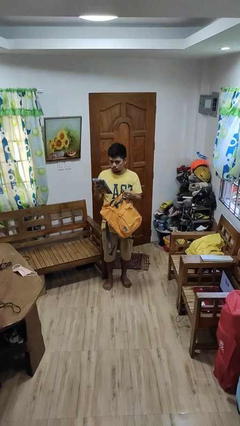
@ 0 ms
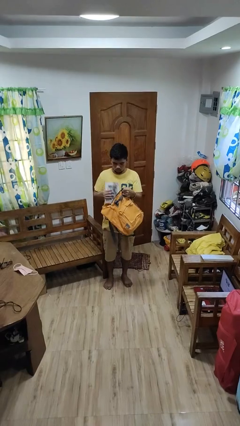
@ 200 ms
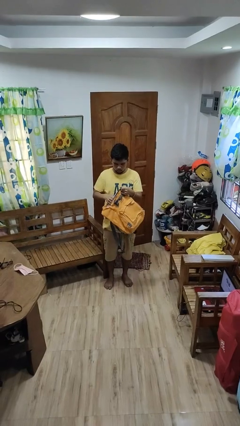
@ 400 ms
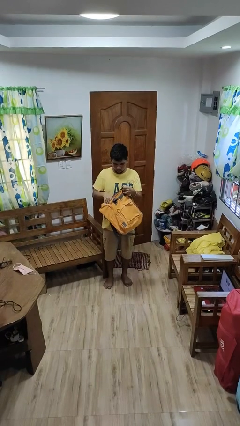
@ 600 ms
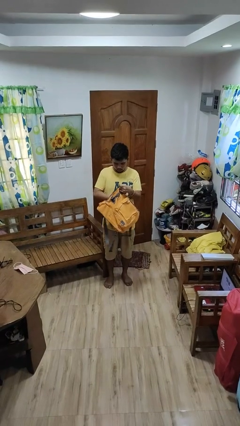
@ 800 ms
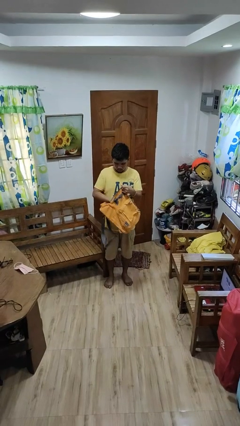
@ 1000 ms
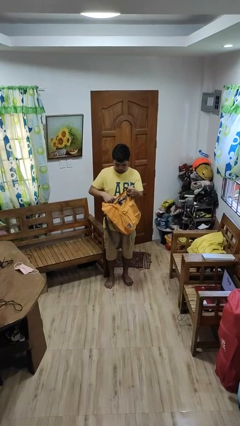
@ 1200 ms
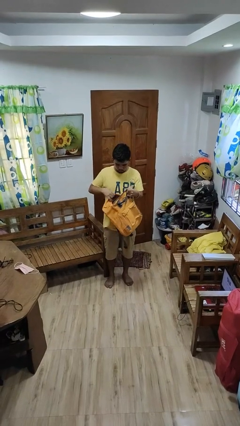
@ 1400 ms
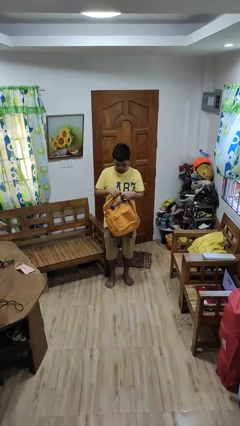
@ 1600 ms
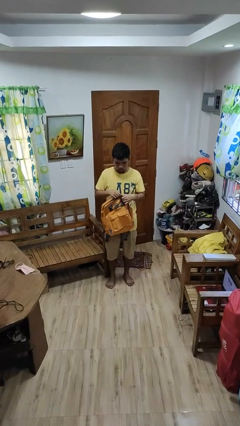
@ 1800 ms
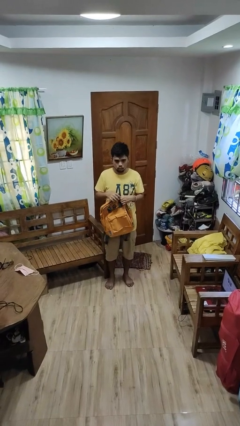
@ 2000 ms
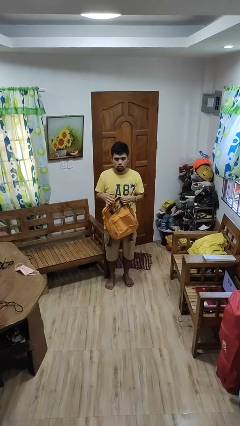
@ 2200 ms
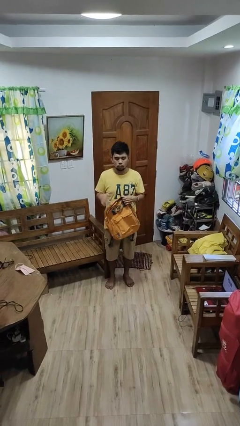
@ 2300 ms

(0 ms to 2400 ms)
person puts object into backpack

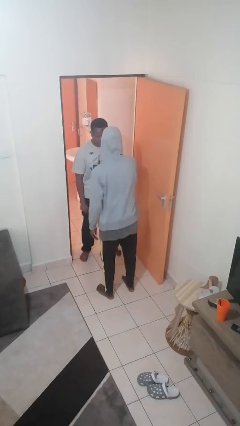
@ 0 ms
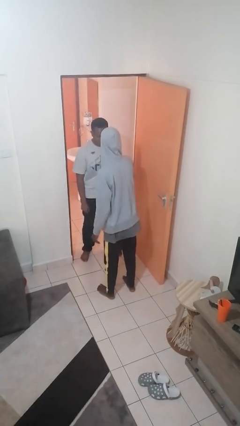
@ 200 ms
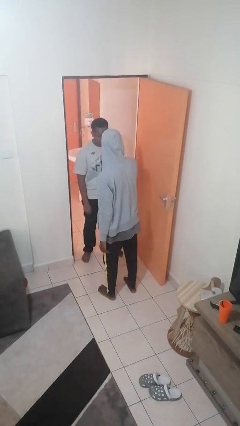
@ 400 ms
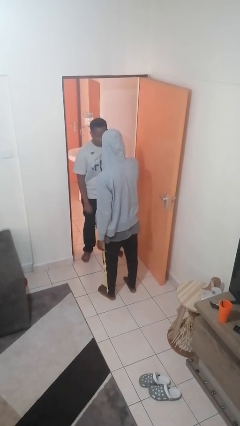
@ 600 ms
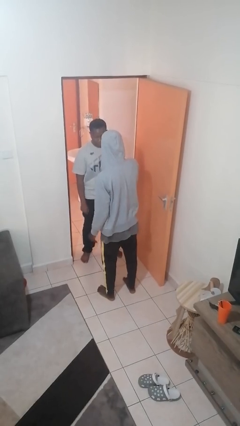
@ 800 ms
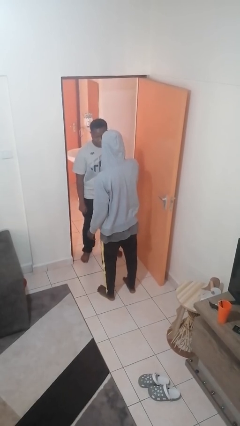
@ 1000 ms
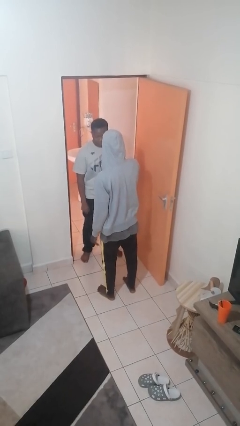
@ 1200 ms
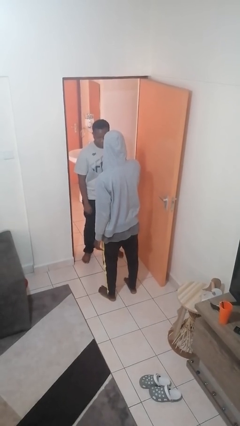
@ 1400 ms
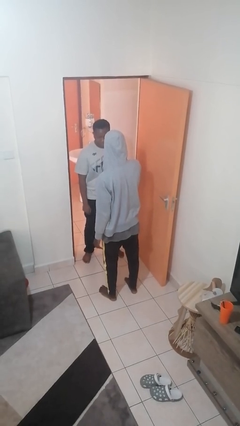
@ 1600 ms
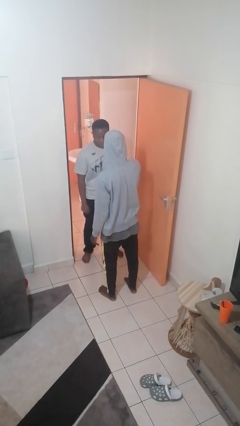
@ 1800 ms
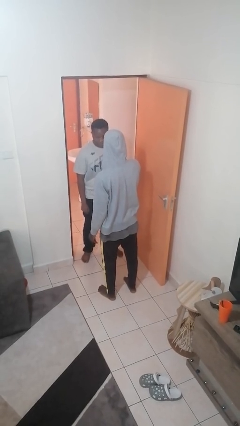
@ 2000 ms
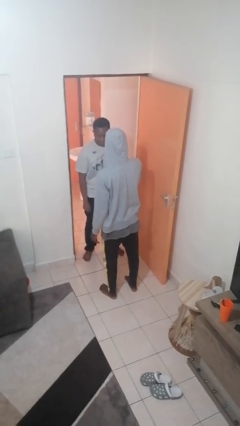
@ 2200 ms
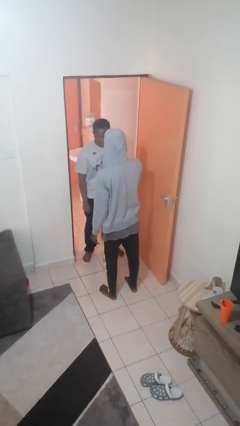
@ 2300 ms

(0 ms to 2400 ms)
person grabs person by bicep

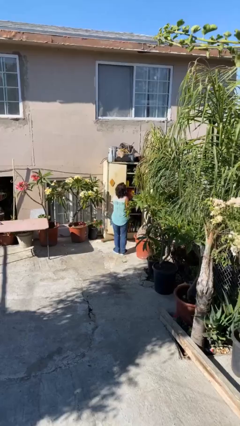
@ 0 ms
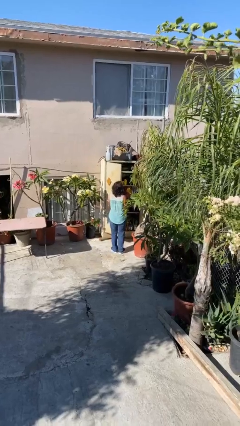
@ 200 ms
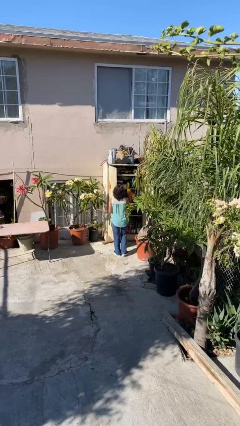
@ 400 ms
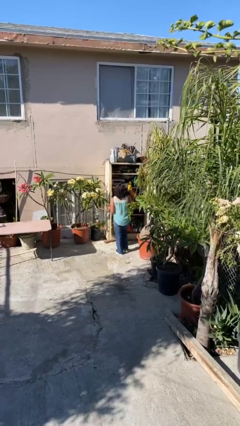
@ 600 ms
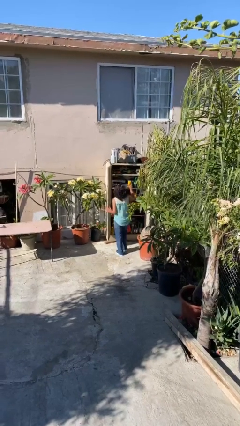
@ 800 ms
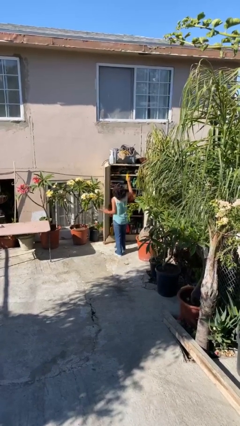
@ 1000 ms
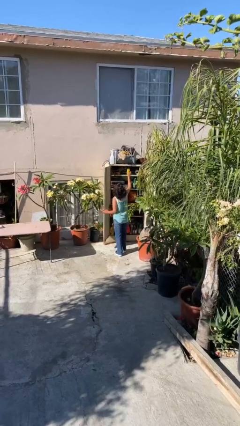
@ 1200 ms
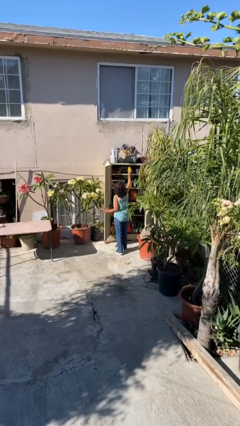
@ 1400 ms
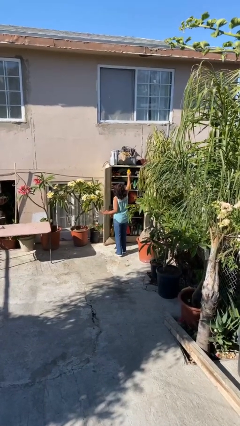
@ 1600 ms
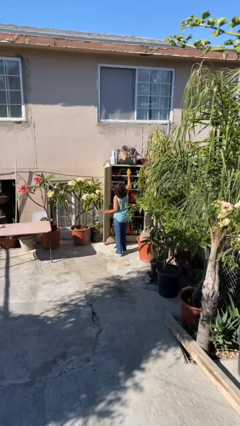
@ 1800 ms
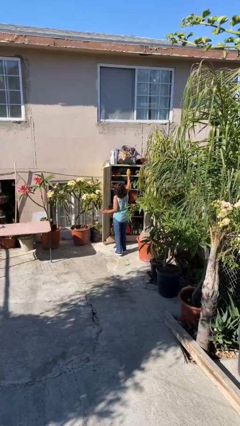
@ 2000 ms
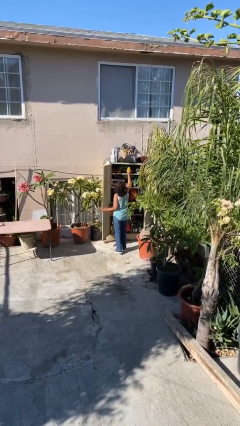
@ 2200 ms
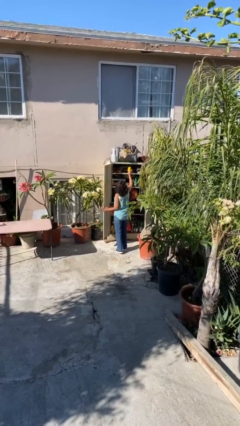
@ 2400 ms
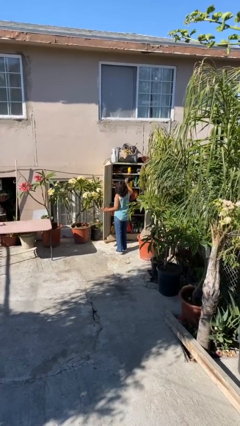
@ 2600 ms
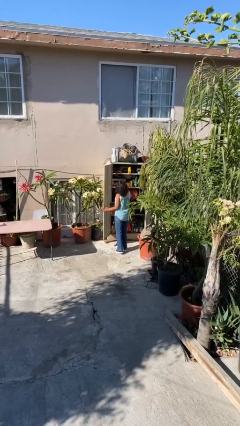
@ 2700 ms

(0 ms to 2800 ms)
person puts down object on shelf

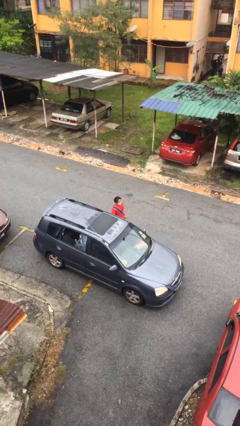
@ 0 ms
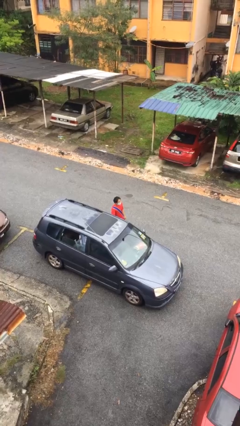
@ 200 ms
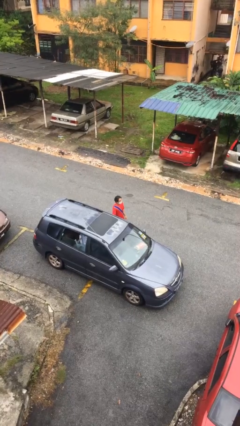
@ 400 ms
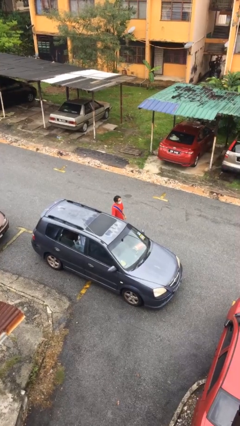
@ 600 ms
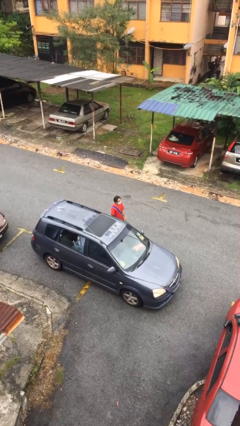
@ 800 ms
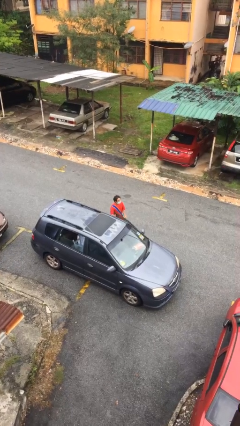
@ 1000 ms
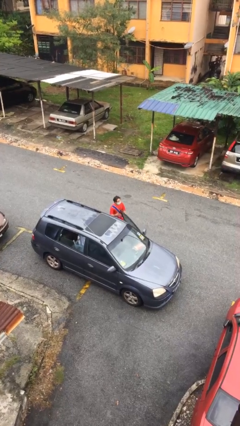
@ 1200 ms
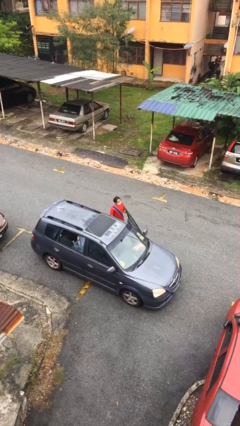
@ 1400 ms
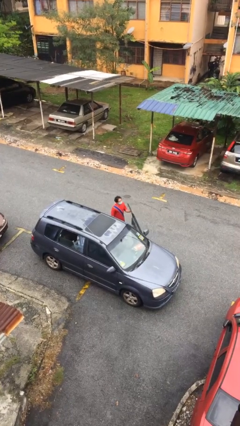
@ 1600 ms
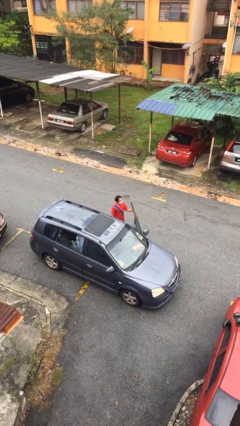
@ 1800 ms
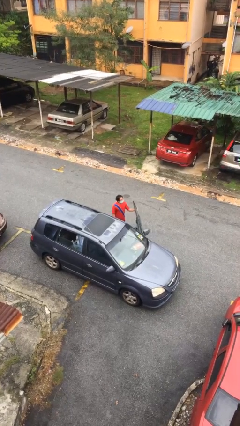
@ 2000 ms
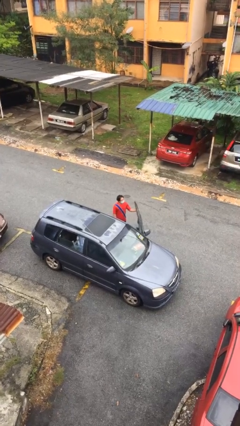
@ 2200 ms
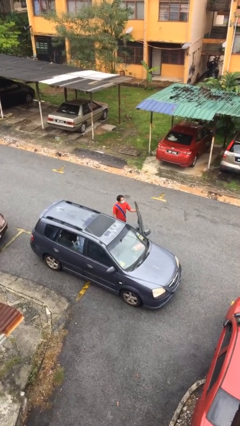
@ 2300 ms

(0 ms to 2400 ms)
person opens car door

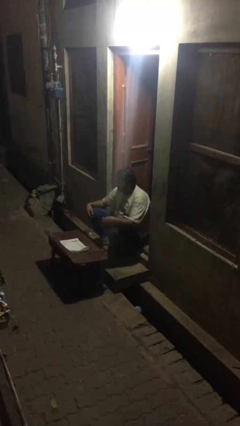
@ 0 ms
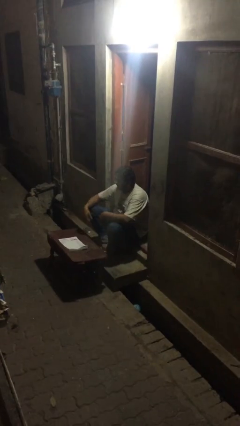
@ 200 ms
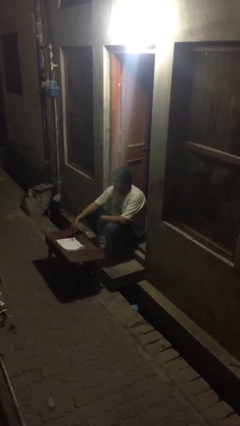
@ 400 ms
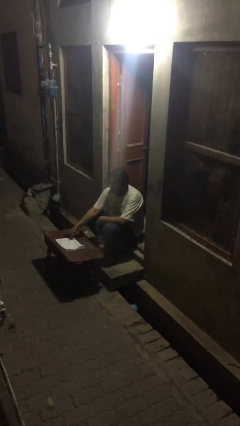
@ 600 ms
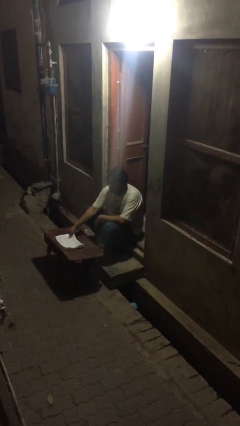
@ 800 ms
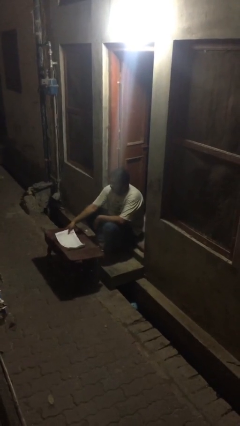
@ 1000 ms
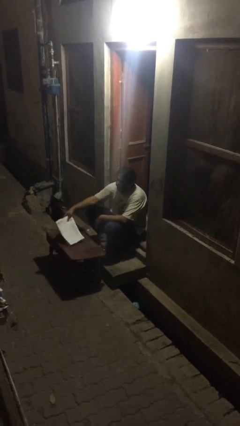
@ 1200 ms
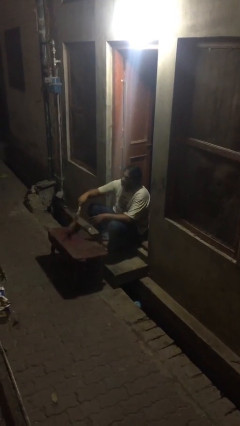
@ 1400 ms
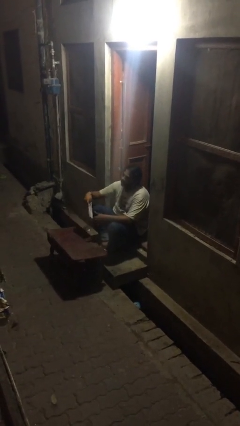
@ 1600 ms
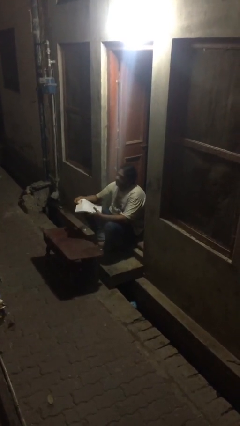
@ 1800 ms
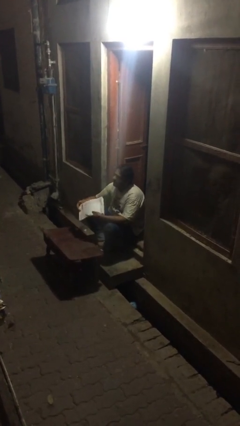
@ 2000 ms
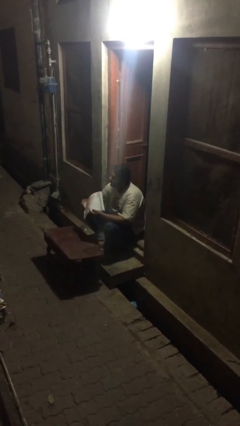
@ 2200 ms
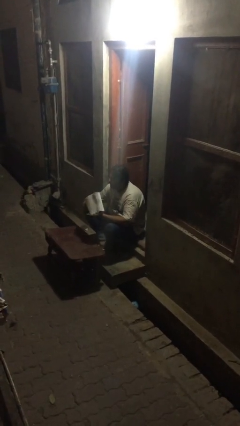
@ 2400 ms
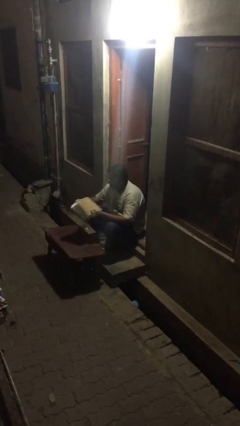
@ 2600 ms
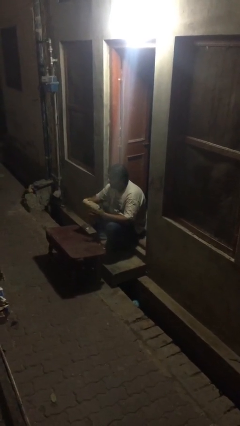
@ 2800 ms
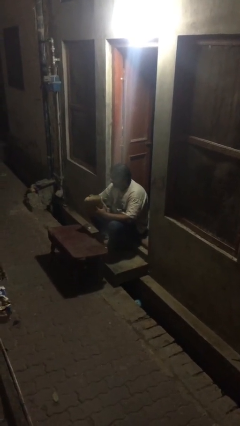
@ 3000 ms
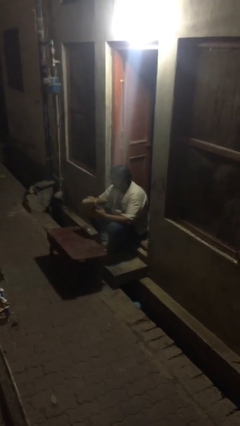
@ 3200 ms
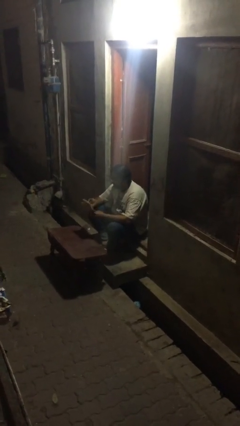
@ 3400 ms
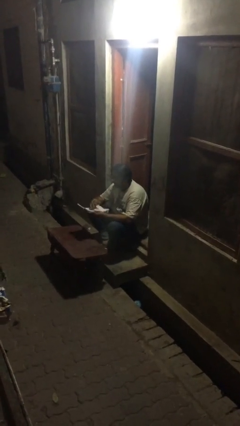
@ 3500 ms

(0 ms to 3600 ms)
person picks up object from table

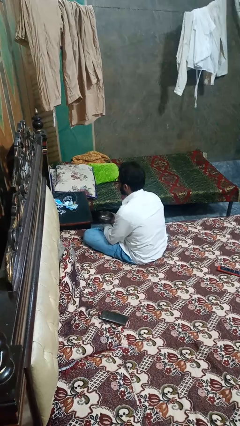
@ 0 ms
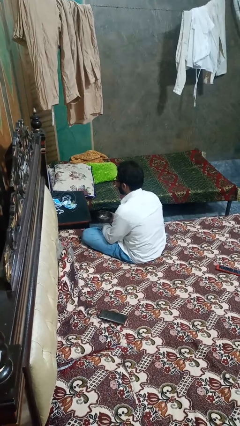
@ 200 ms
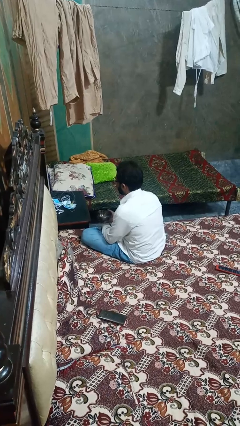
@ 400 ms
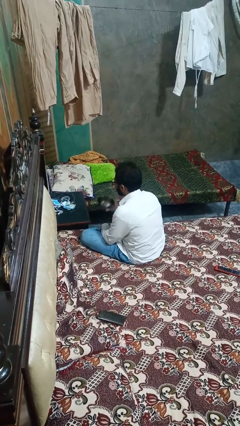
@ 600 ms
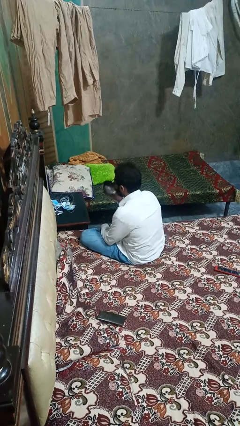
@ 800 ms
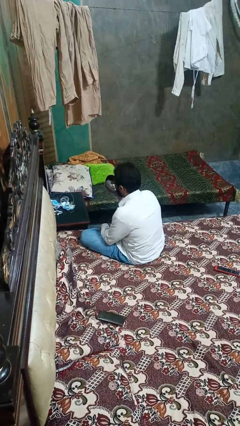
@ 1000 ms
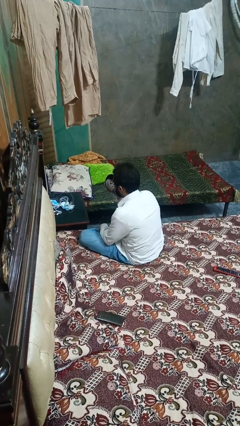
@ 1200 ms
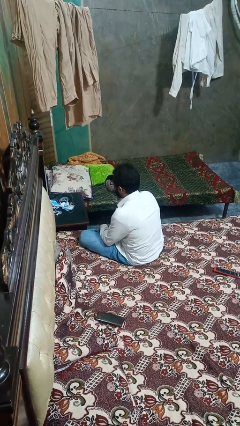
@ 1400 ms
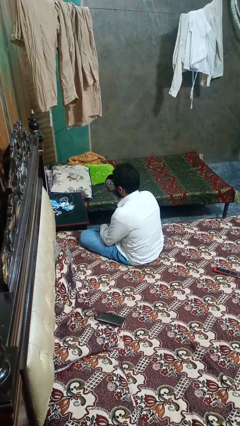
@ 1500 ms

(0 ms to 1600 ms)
person drinks from shotglass

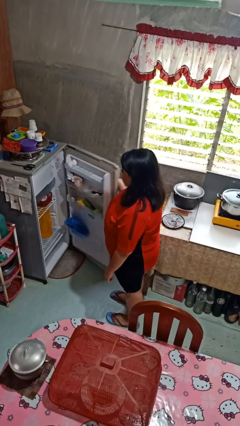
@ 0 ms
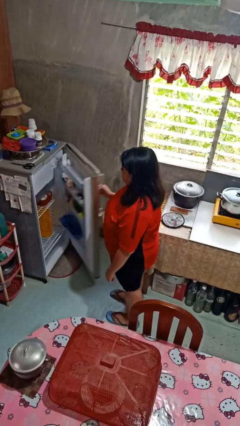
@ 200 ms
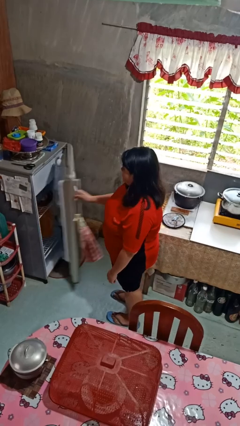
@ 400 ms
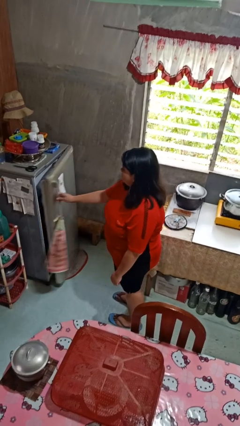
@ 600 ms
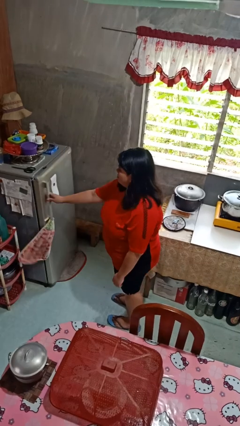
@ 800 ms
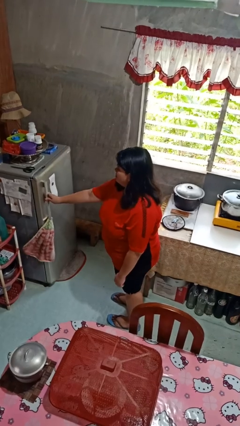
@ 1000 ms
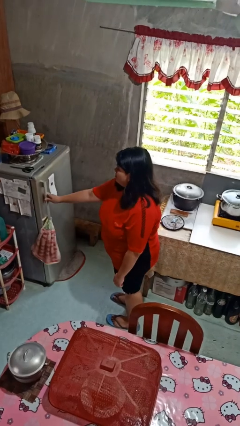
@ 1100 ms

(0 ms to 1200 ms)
person closes refrigerator

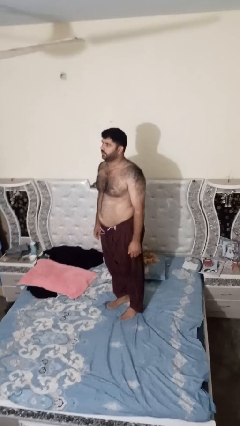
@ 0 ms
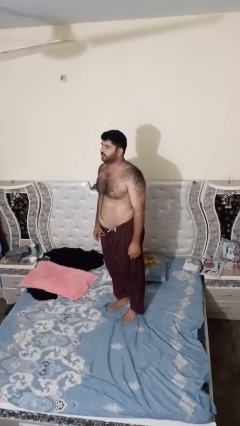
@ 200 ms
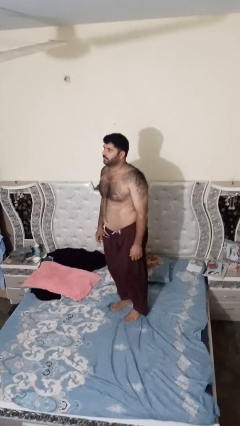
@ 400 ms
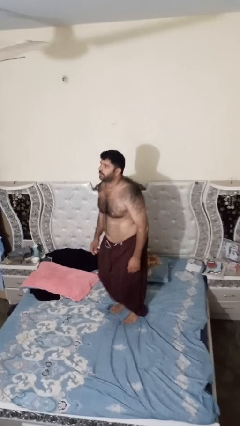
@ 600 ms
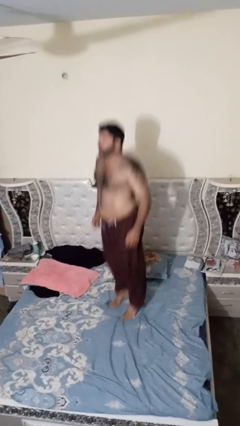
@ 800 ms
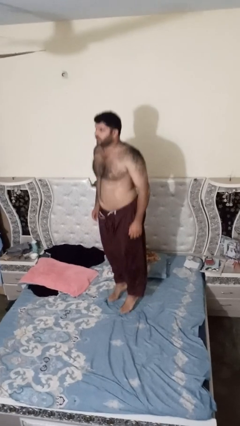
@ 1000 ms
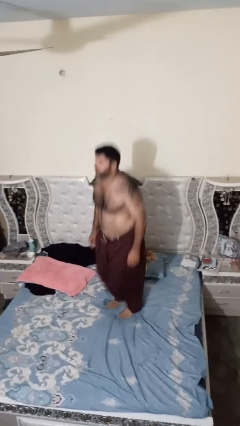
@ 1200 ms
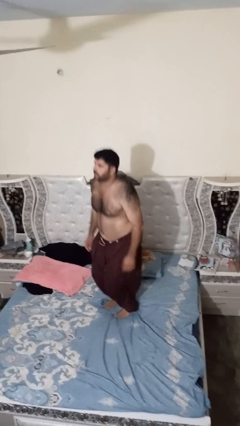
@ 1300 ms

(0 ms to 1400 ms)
person jumps on bed
